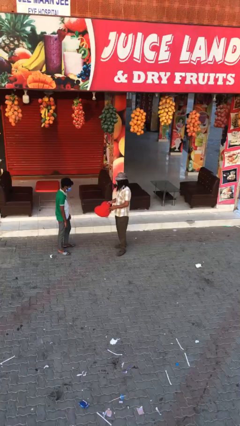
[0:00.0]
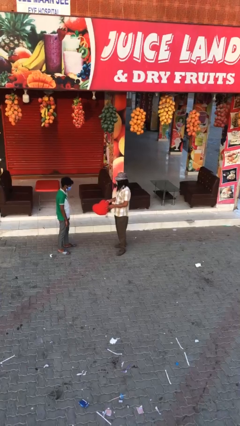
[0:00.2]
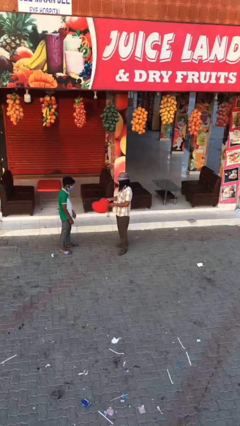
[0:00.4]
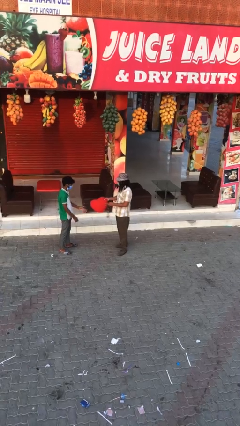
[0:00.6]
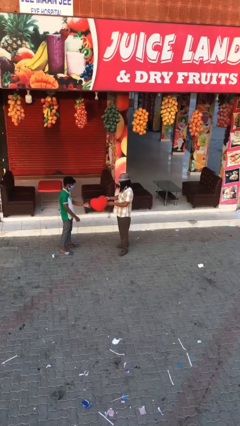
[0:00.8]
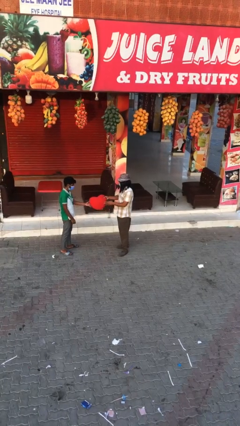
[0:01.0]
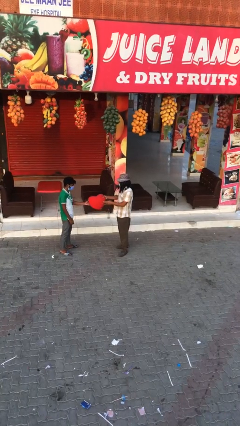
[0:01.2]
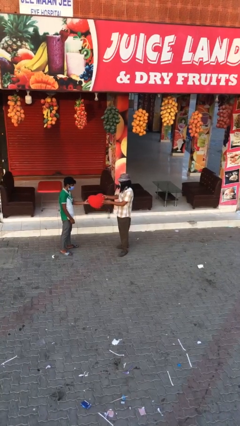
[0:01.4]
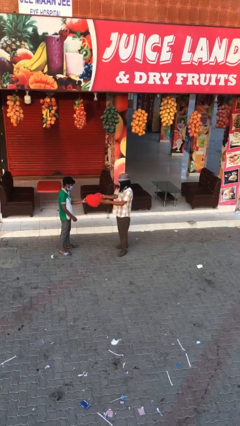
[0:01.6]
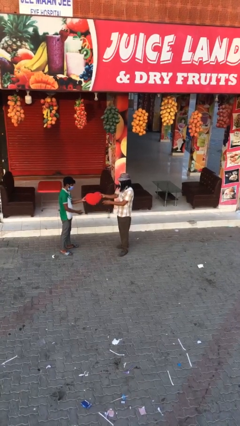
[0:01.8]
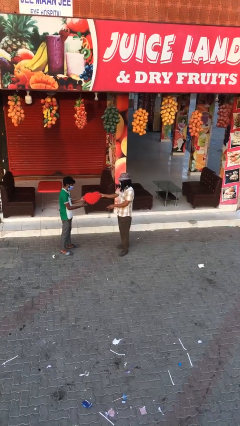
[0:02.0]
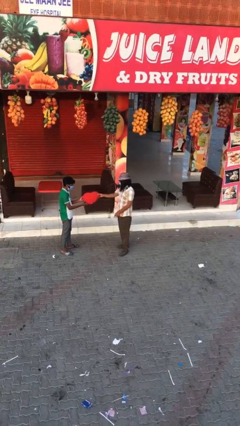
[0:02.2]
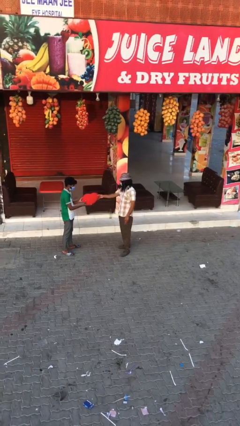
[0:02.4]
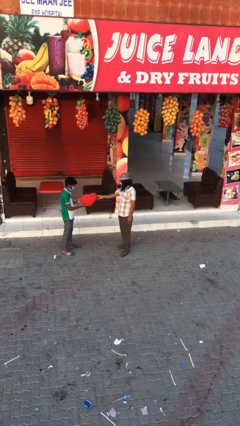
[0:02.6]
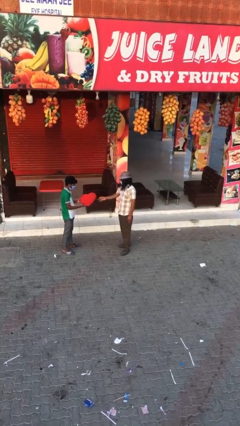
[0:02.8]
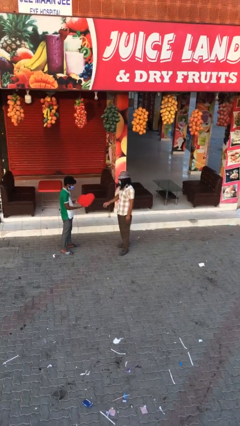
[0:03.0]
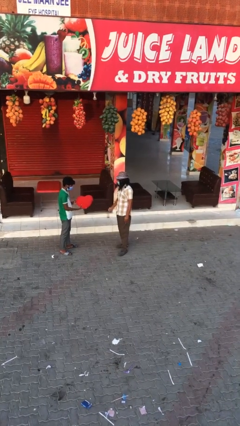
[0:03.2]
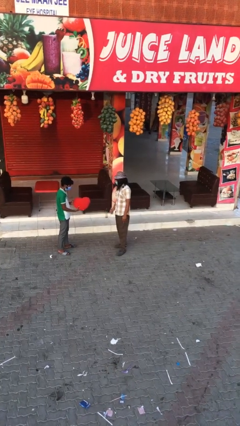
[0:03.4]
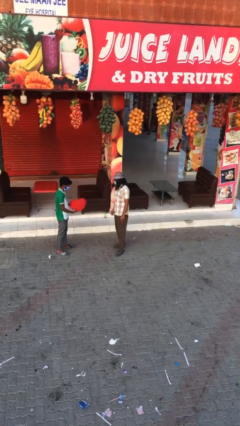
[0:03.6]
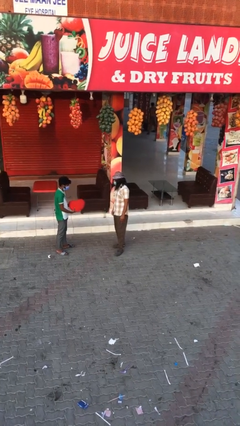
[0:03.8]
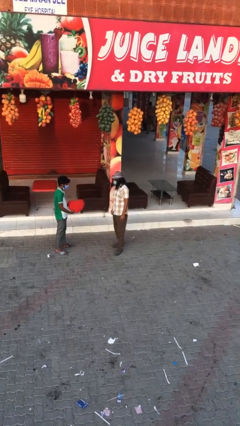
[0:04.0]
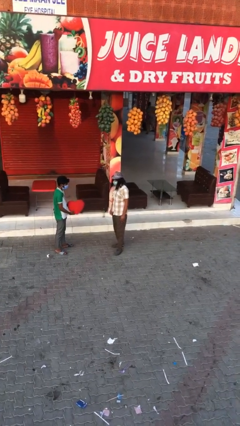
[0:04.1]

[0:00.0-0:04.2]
person transfers object to person

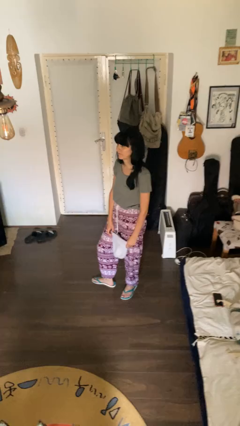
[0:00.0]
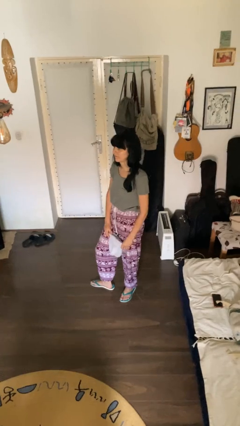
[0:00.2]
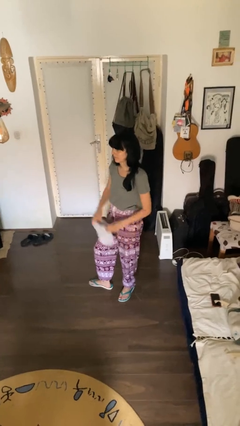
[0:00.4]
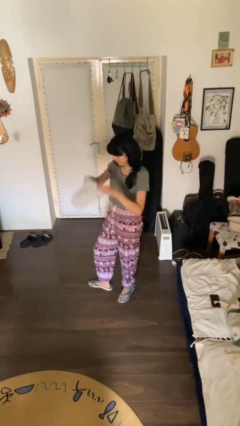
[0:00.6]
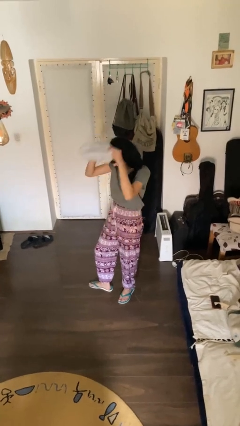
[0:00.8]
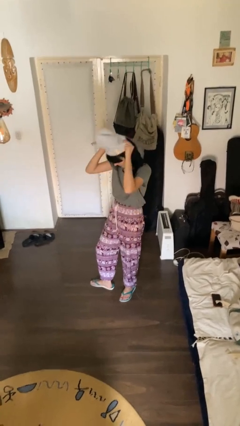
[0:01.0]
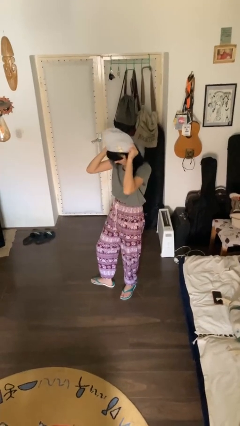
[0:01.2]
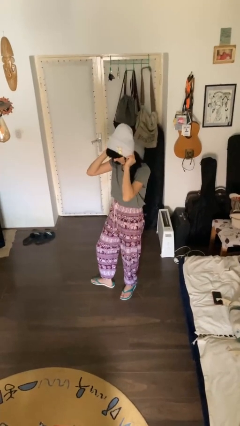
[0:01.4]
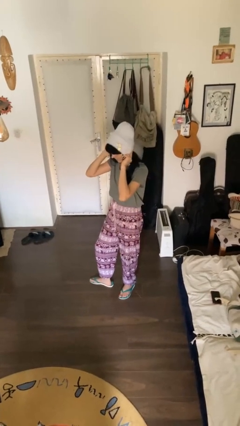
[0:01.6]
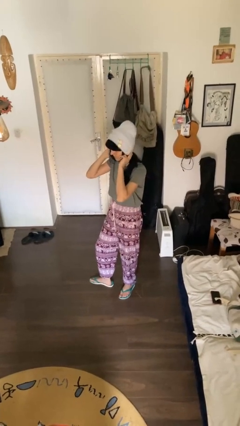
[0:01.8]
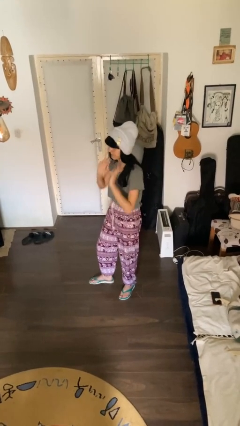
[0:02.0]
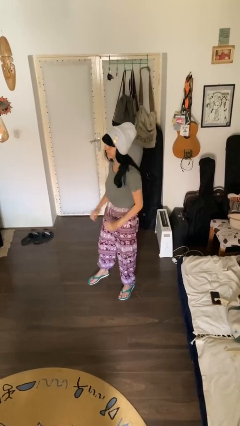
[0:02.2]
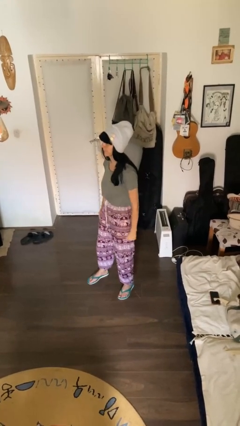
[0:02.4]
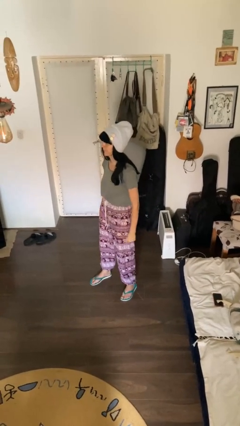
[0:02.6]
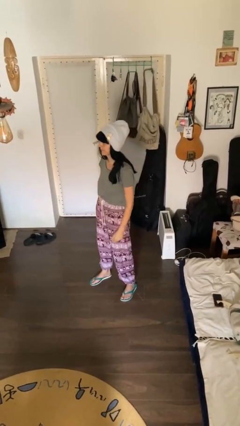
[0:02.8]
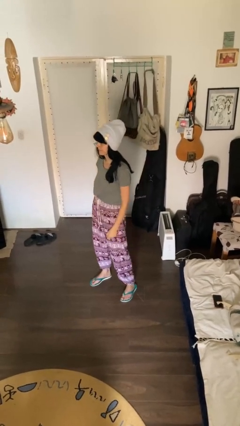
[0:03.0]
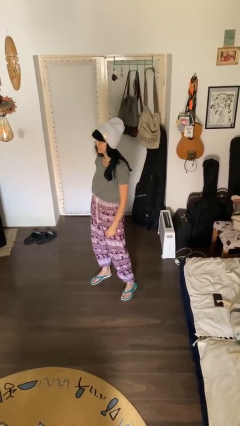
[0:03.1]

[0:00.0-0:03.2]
person puts on hat

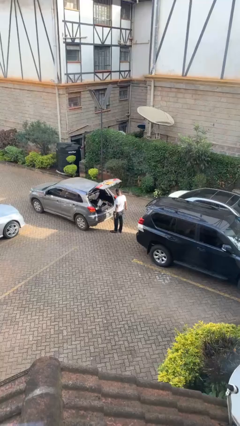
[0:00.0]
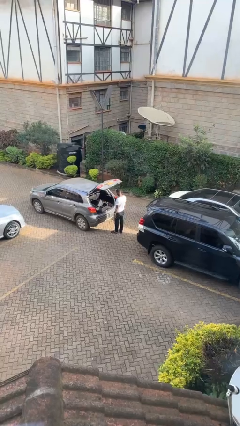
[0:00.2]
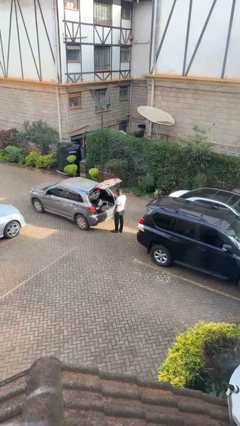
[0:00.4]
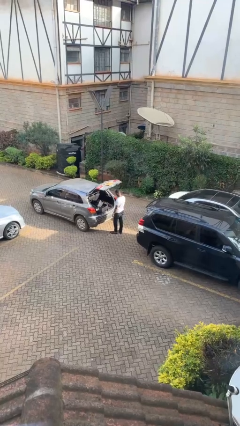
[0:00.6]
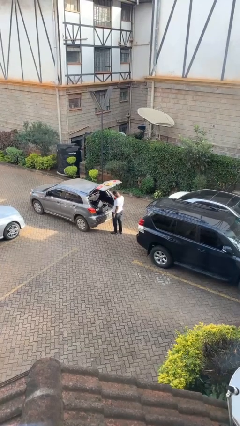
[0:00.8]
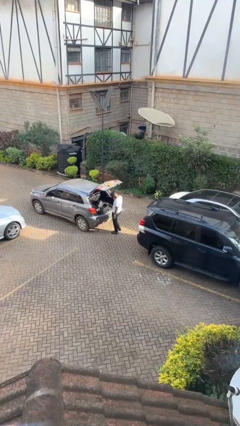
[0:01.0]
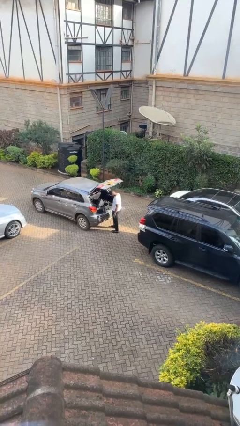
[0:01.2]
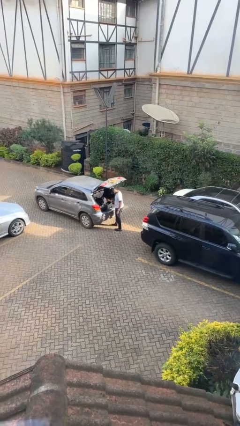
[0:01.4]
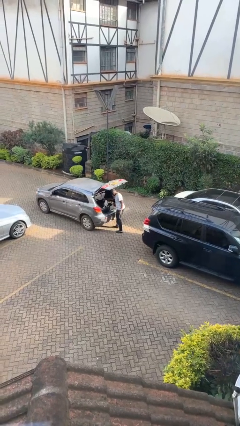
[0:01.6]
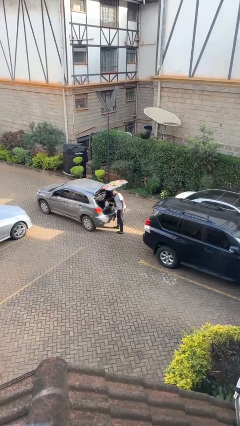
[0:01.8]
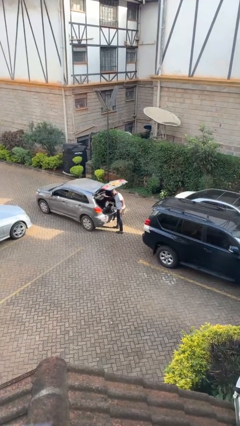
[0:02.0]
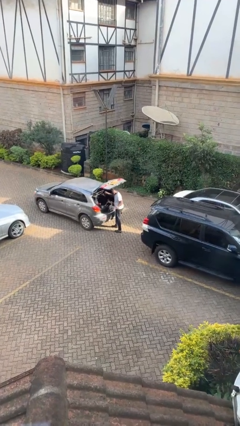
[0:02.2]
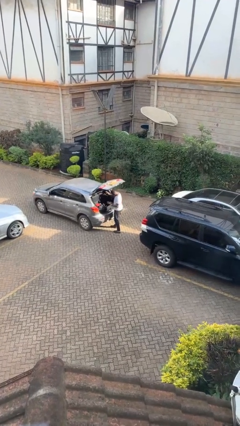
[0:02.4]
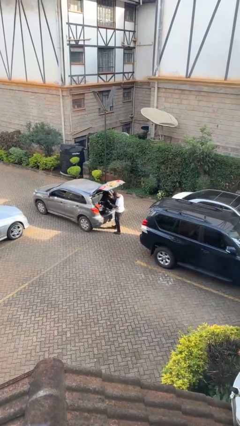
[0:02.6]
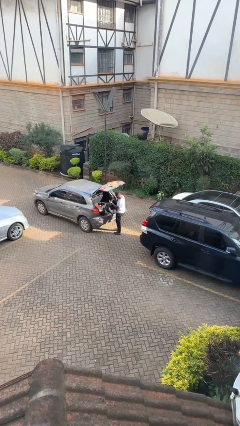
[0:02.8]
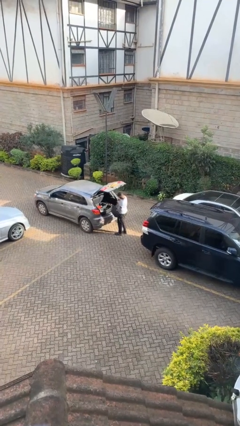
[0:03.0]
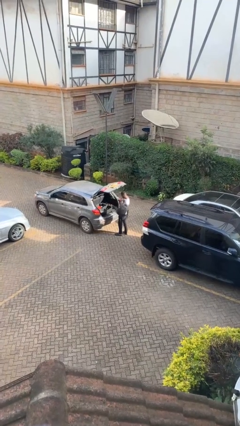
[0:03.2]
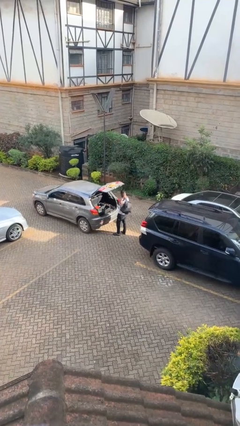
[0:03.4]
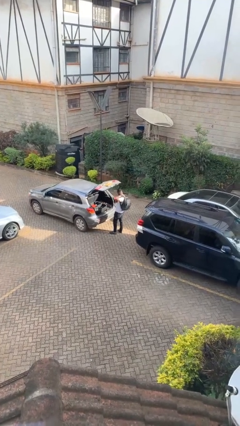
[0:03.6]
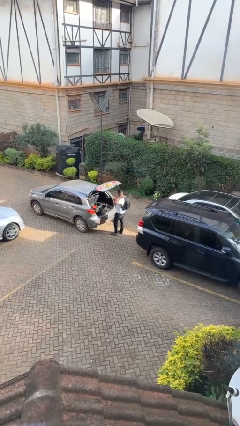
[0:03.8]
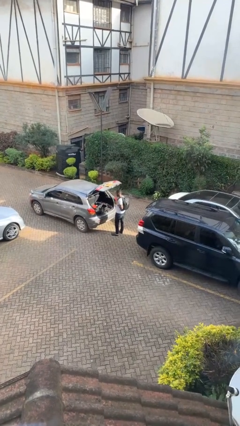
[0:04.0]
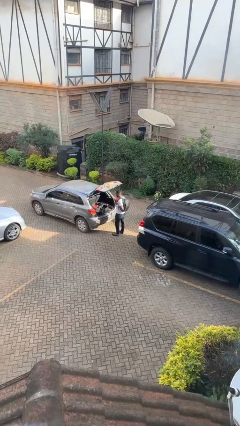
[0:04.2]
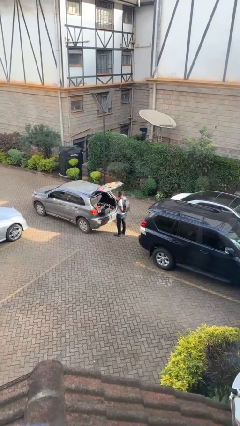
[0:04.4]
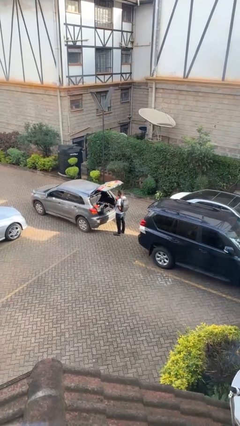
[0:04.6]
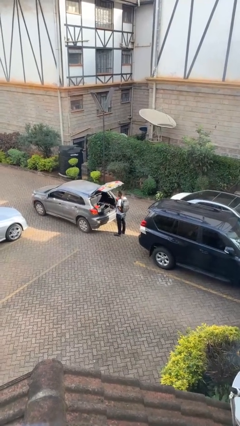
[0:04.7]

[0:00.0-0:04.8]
person unloads car

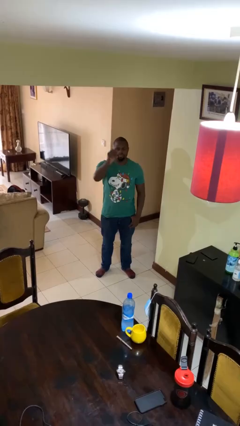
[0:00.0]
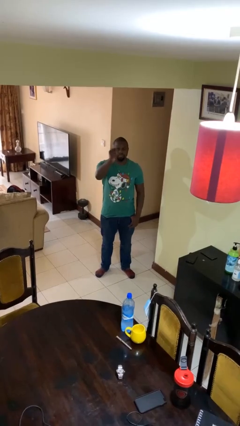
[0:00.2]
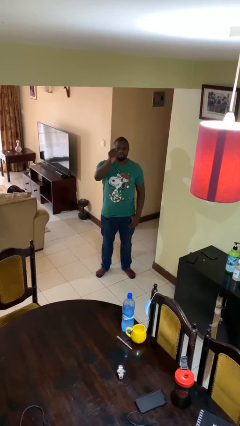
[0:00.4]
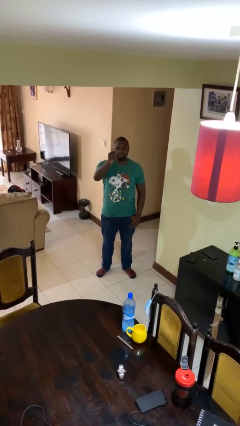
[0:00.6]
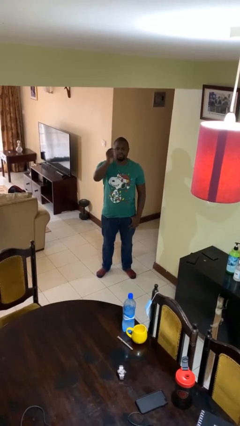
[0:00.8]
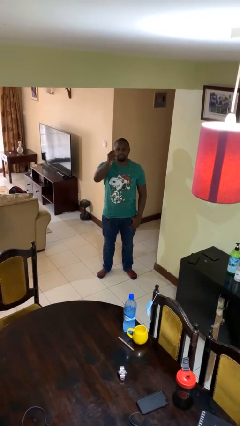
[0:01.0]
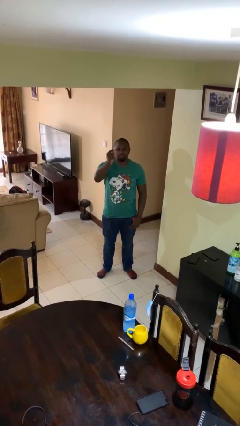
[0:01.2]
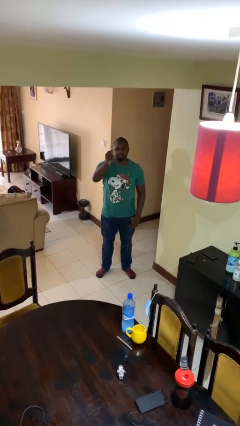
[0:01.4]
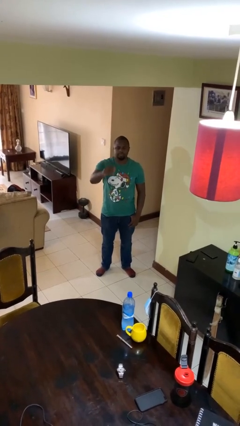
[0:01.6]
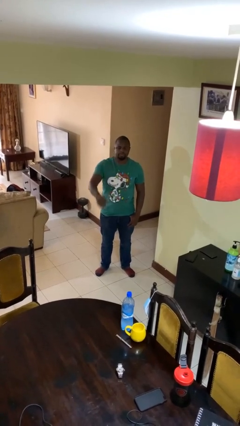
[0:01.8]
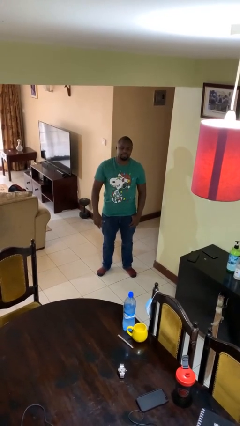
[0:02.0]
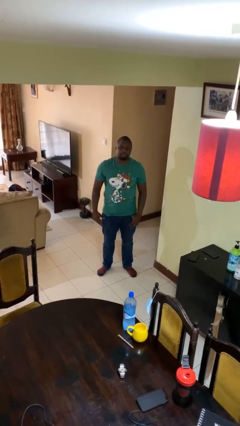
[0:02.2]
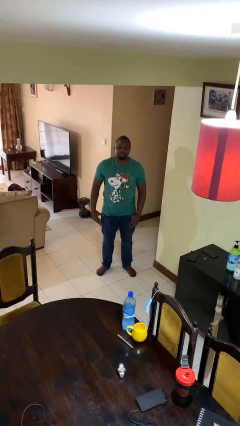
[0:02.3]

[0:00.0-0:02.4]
person snaps fingers

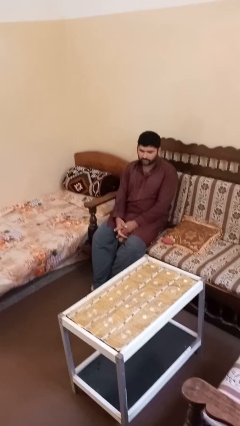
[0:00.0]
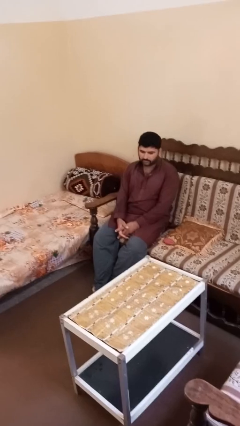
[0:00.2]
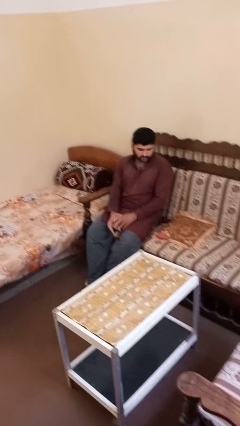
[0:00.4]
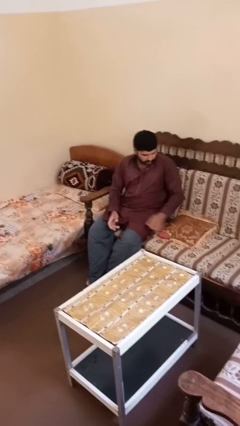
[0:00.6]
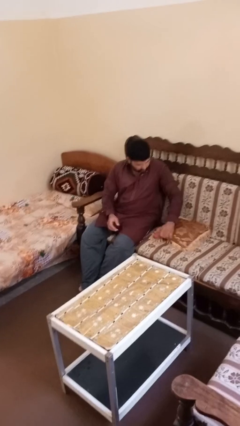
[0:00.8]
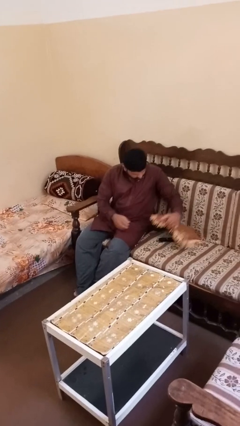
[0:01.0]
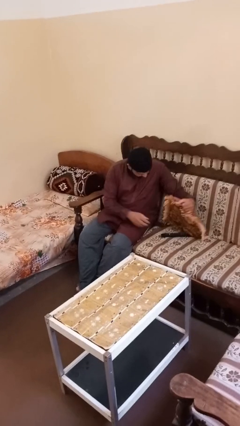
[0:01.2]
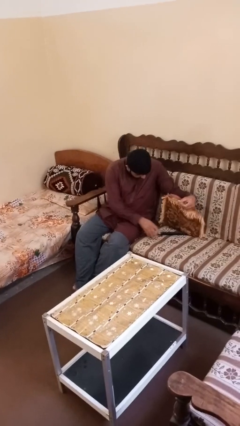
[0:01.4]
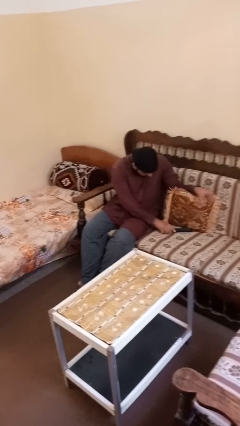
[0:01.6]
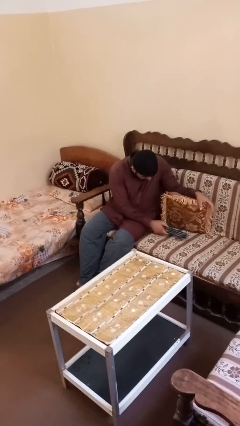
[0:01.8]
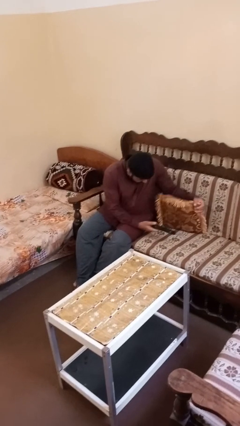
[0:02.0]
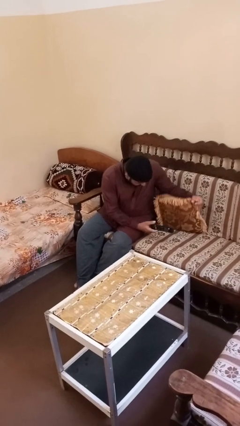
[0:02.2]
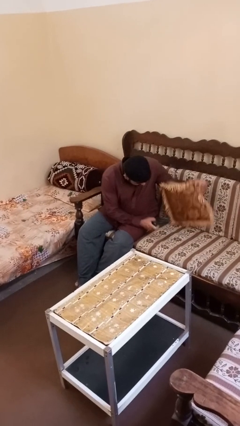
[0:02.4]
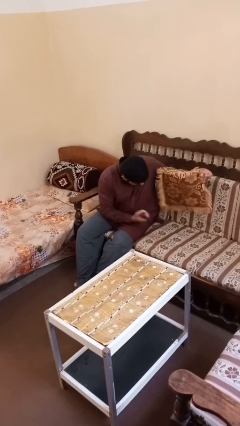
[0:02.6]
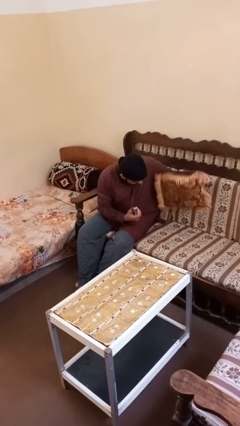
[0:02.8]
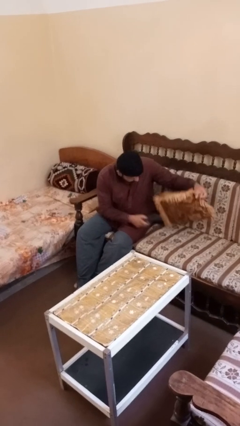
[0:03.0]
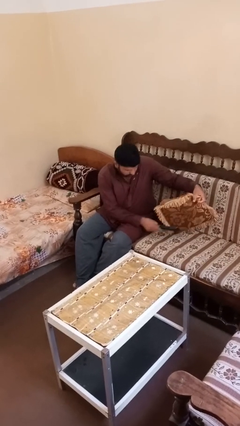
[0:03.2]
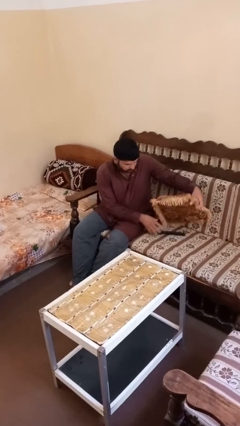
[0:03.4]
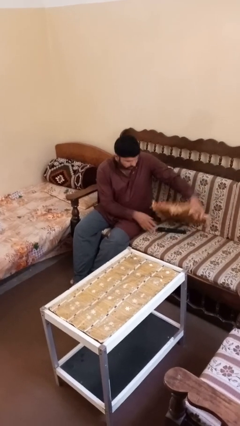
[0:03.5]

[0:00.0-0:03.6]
person searches in couch
